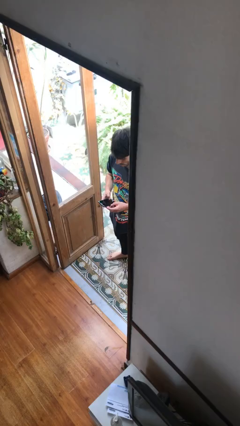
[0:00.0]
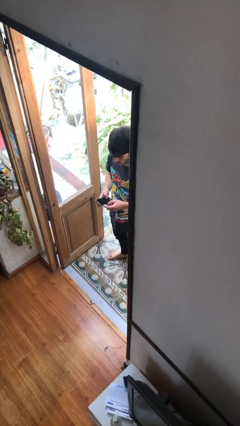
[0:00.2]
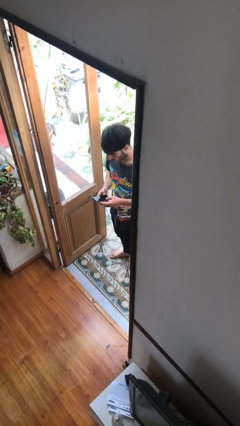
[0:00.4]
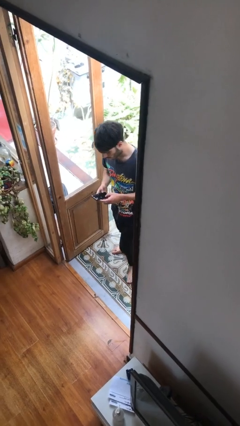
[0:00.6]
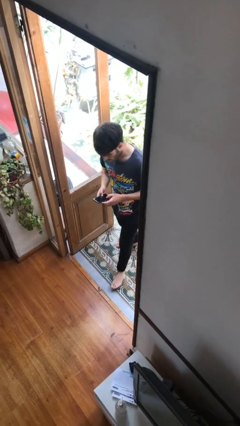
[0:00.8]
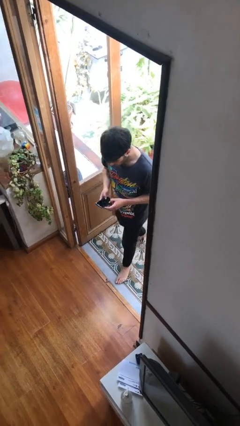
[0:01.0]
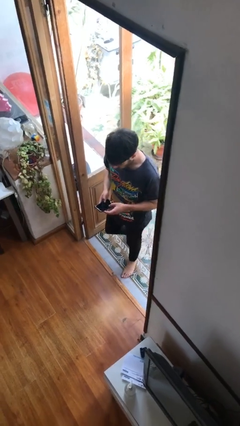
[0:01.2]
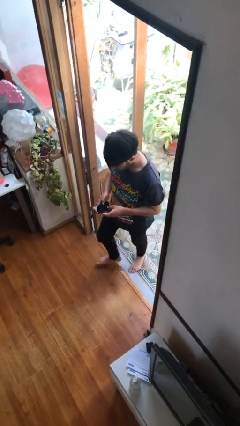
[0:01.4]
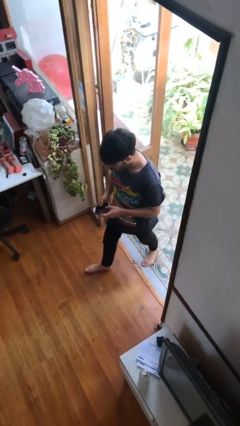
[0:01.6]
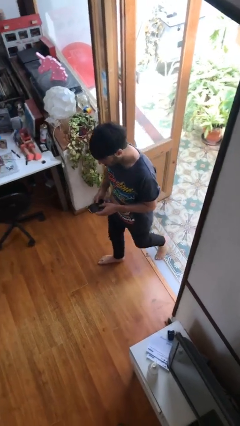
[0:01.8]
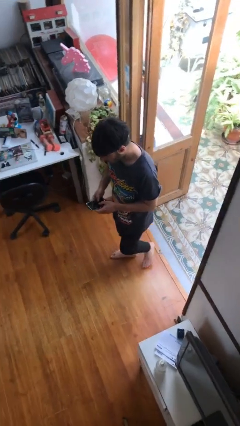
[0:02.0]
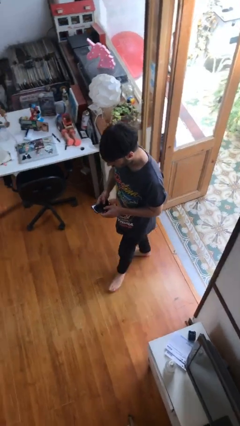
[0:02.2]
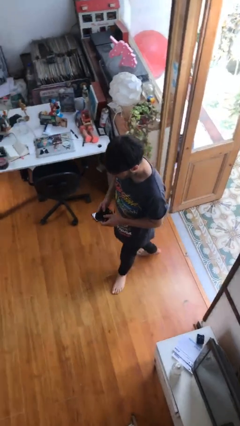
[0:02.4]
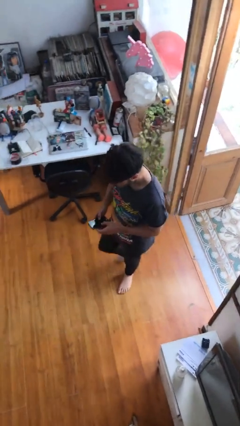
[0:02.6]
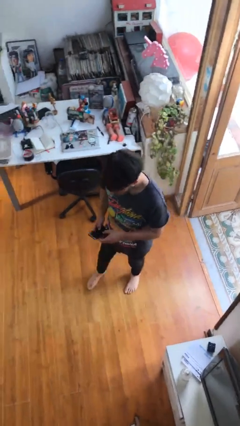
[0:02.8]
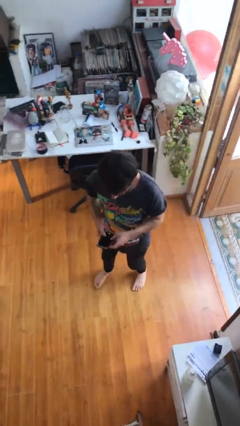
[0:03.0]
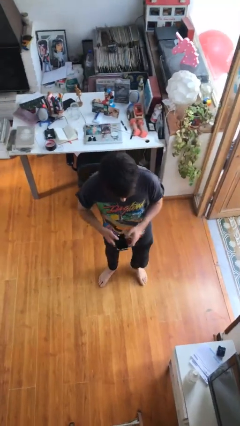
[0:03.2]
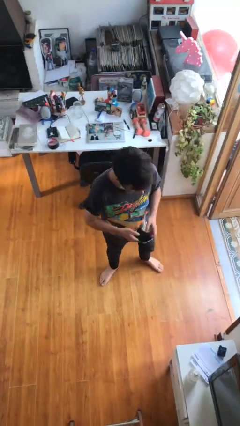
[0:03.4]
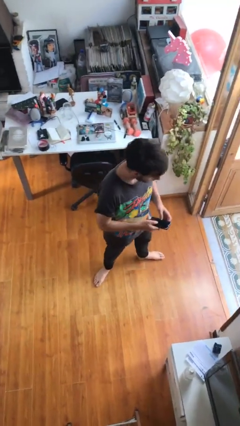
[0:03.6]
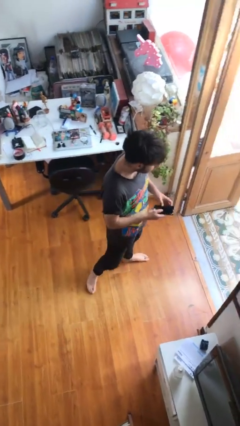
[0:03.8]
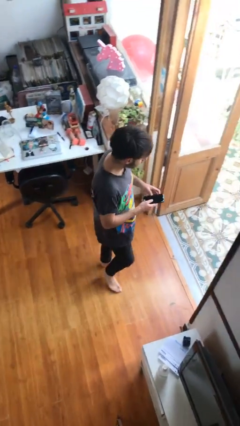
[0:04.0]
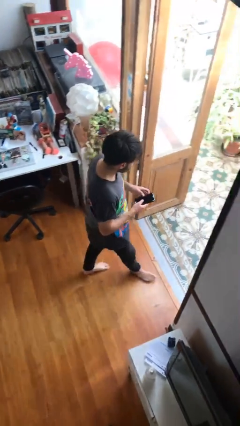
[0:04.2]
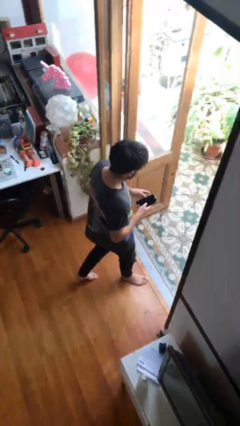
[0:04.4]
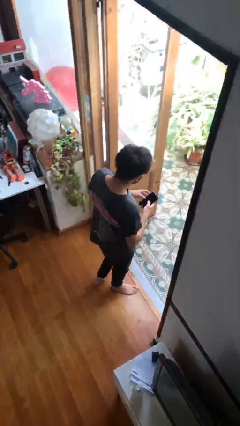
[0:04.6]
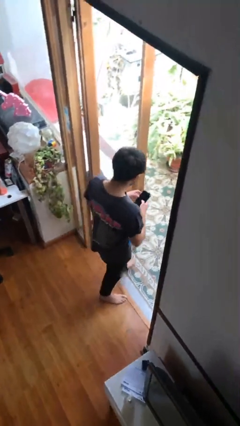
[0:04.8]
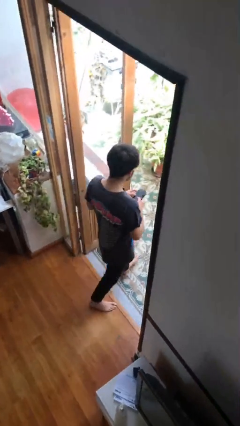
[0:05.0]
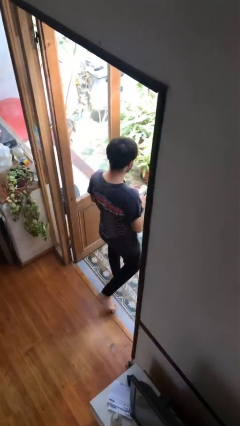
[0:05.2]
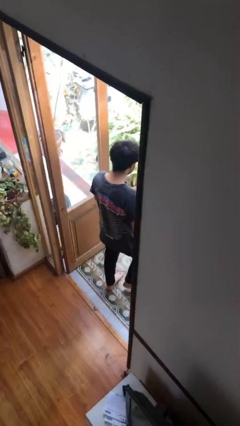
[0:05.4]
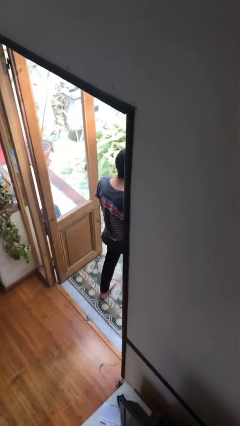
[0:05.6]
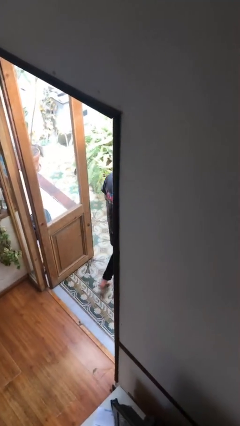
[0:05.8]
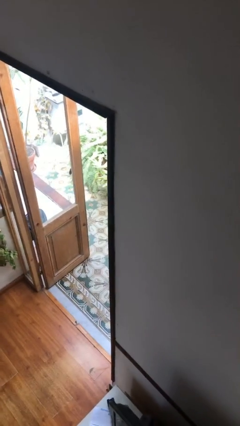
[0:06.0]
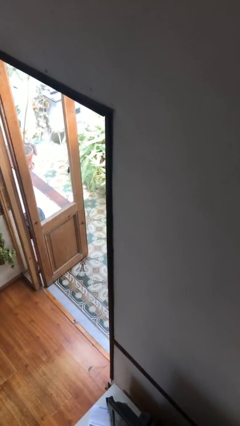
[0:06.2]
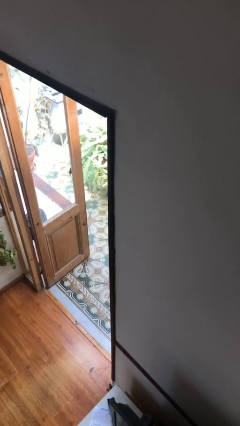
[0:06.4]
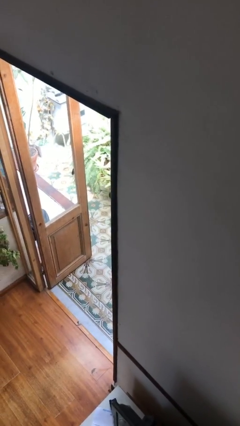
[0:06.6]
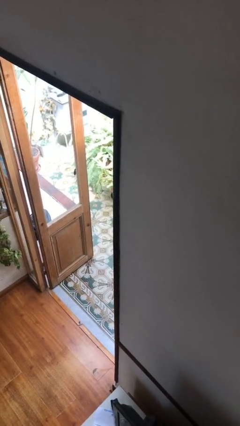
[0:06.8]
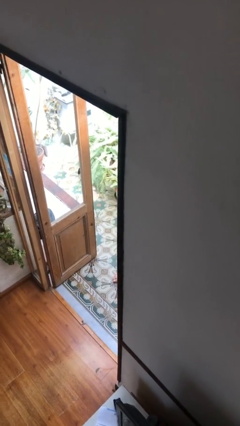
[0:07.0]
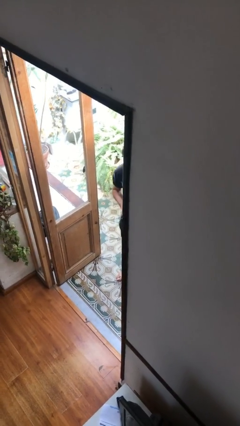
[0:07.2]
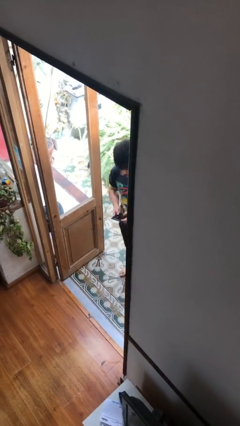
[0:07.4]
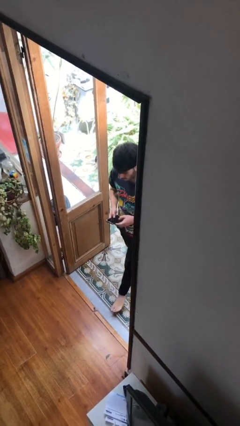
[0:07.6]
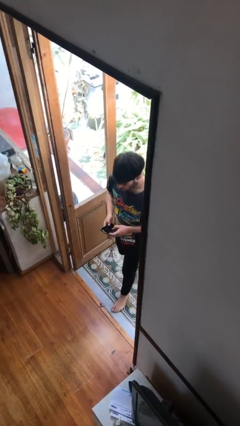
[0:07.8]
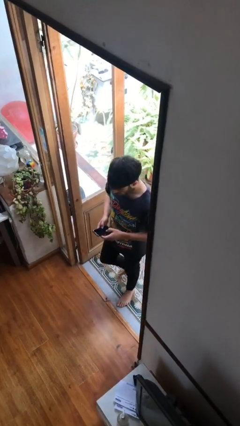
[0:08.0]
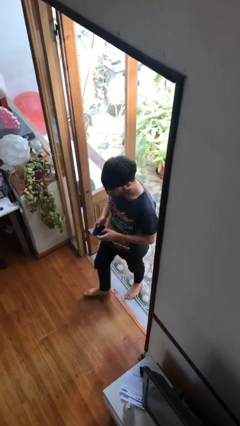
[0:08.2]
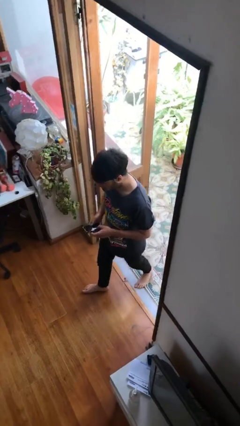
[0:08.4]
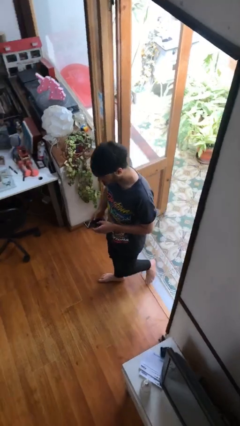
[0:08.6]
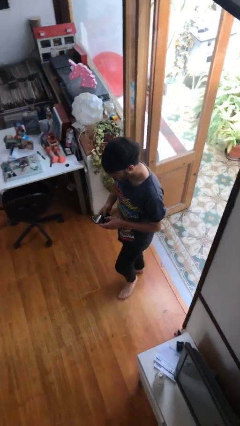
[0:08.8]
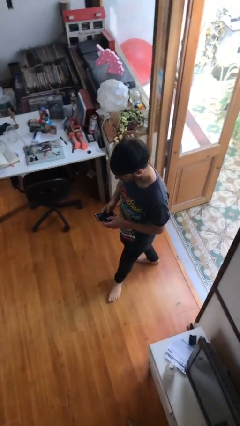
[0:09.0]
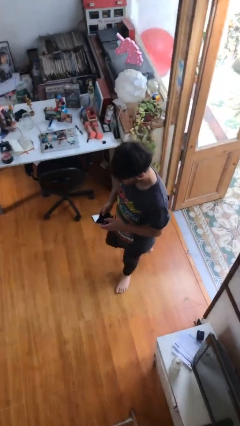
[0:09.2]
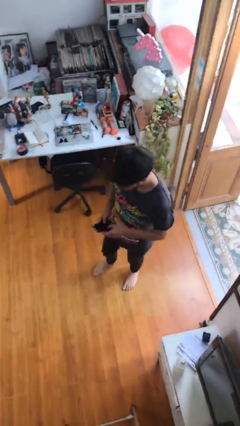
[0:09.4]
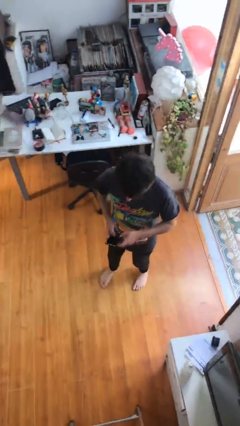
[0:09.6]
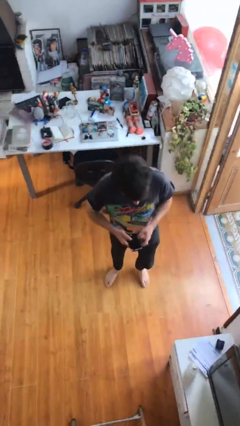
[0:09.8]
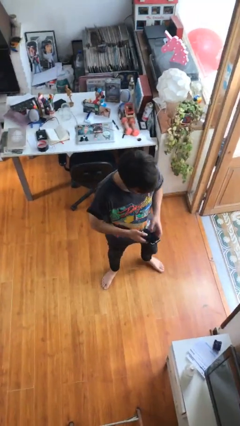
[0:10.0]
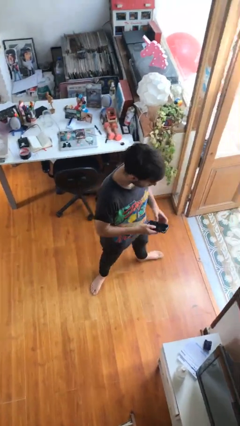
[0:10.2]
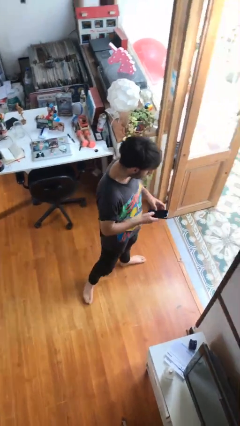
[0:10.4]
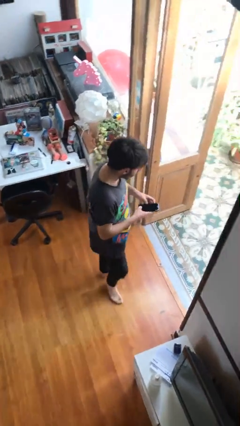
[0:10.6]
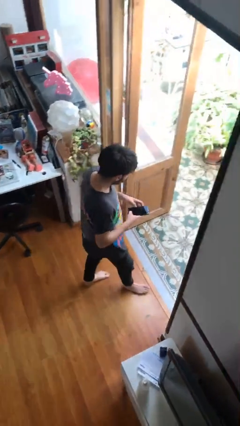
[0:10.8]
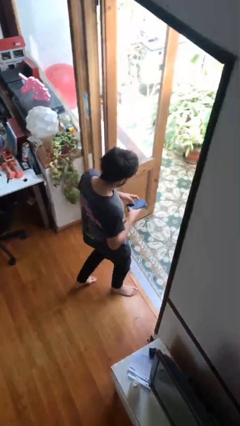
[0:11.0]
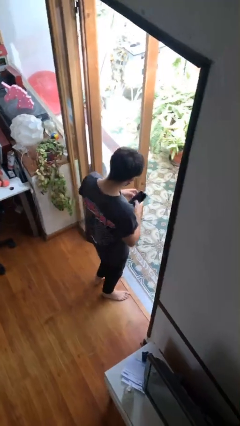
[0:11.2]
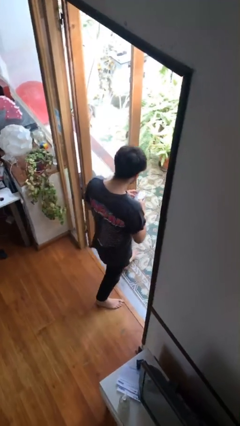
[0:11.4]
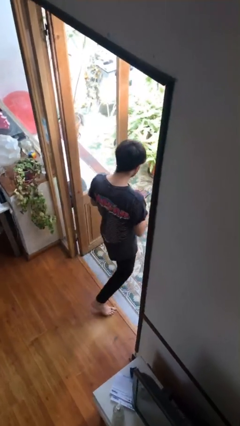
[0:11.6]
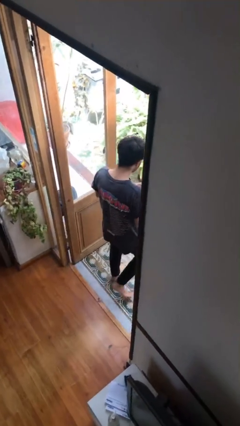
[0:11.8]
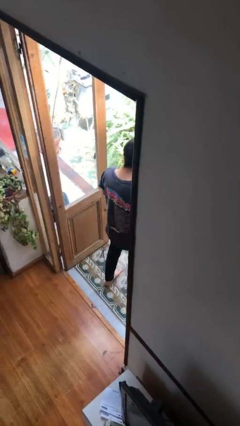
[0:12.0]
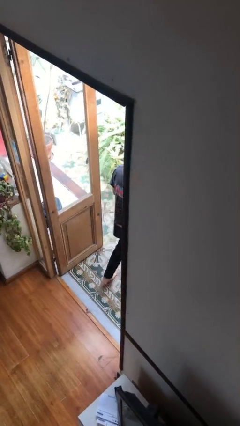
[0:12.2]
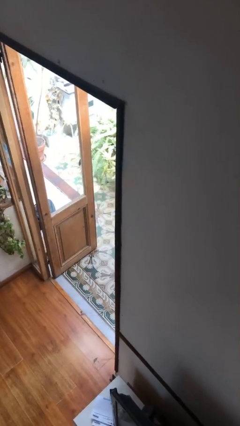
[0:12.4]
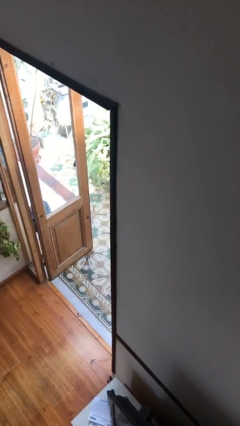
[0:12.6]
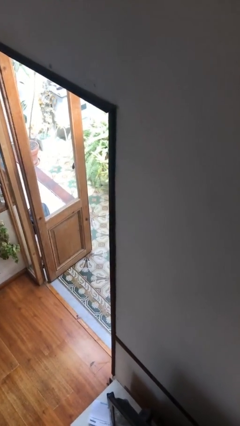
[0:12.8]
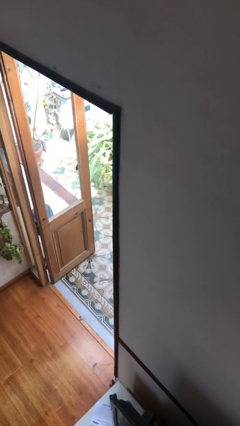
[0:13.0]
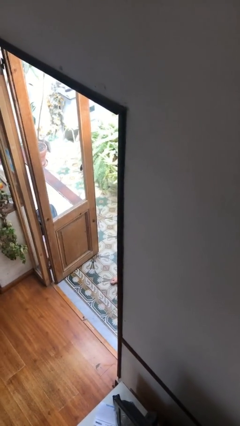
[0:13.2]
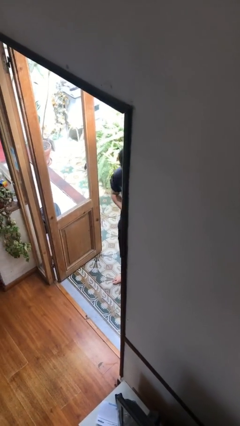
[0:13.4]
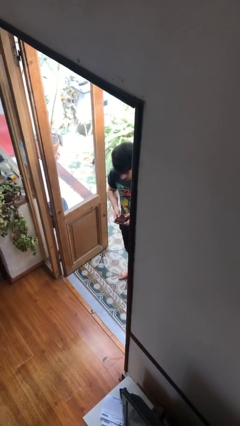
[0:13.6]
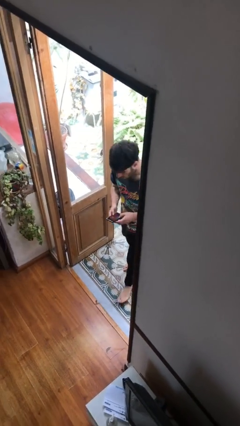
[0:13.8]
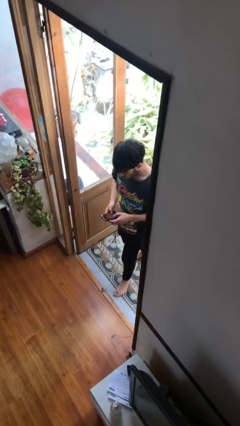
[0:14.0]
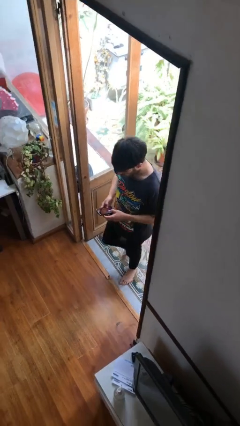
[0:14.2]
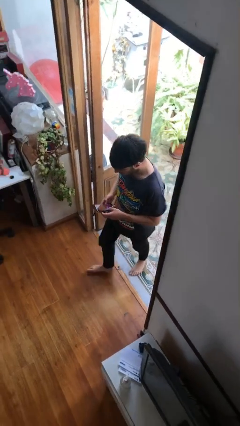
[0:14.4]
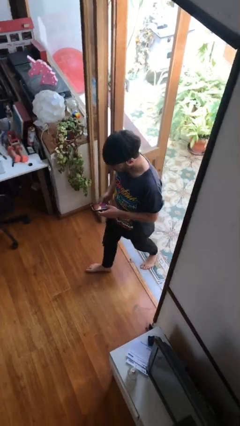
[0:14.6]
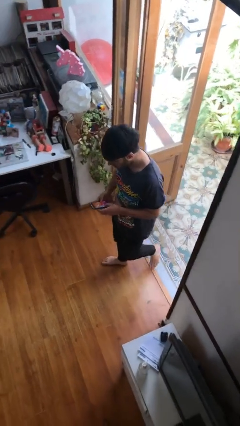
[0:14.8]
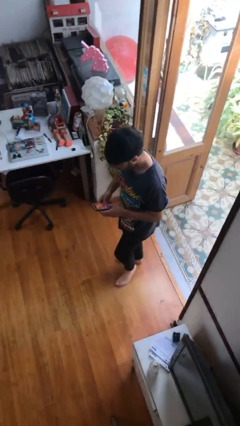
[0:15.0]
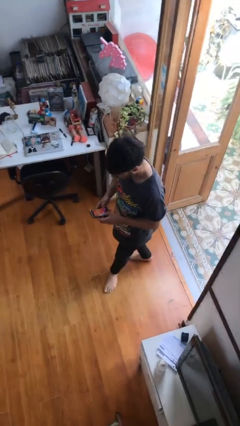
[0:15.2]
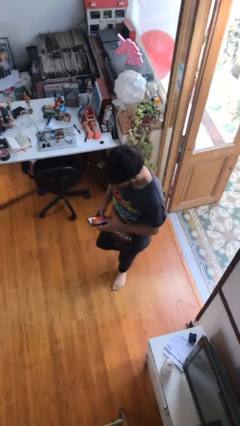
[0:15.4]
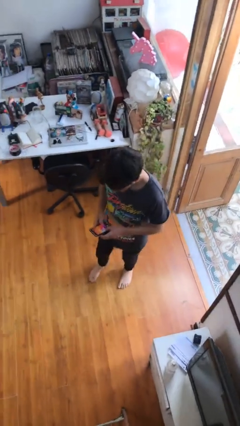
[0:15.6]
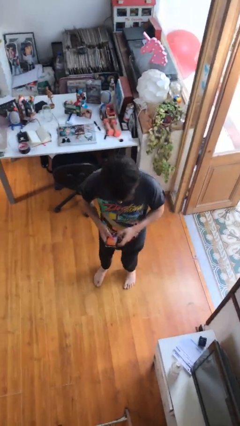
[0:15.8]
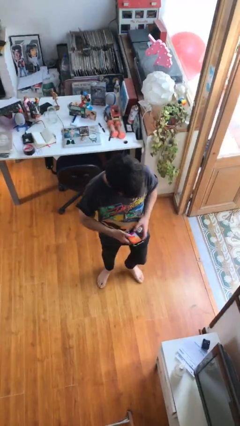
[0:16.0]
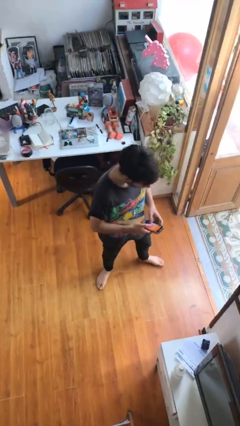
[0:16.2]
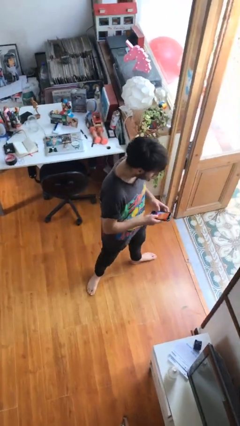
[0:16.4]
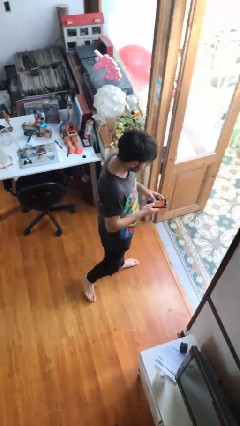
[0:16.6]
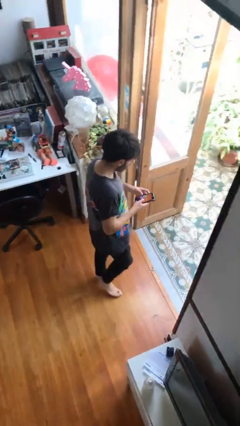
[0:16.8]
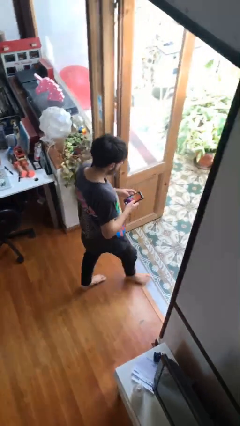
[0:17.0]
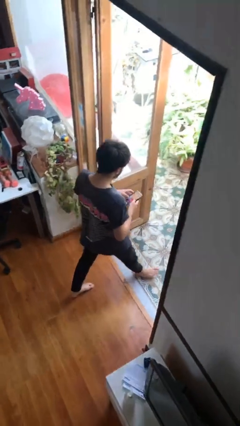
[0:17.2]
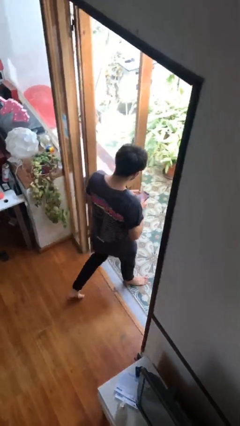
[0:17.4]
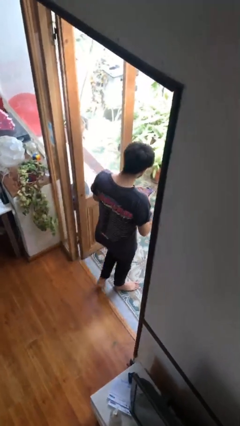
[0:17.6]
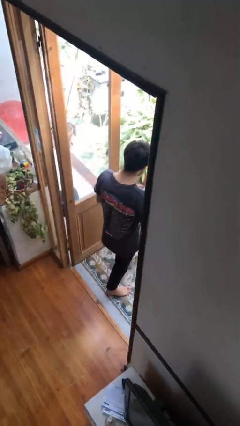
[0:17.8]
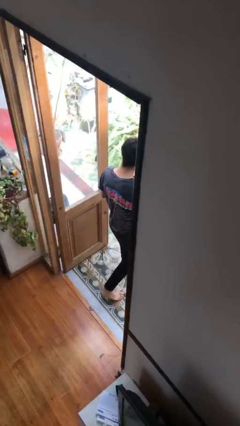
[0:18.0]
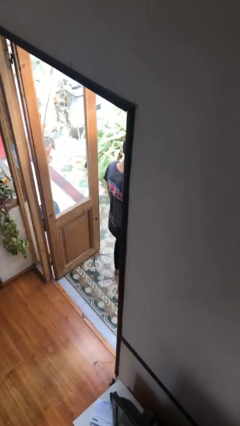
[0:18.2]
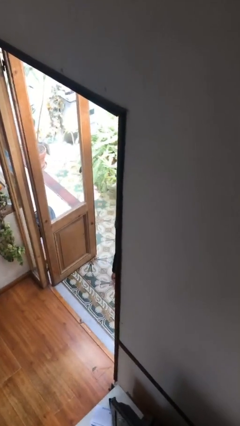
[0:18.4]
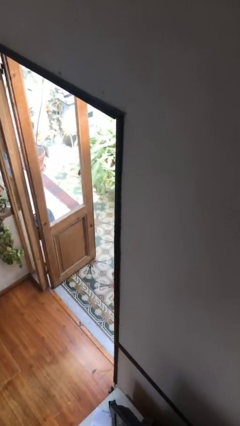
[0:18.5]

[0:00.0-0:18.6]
person texts on phone
